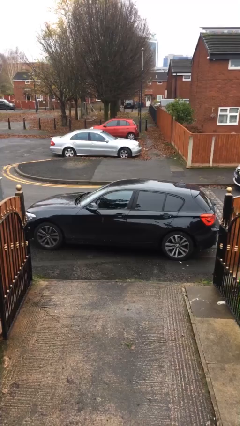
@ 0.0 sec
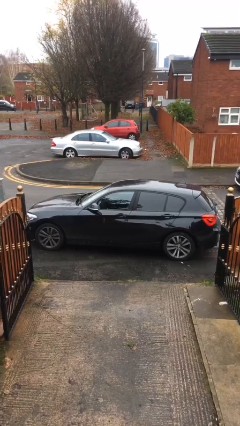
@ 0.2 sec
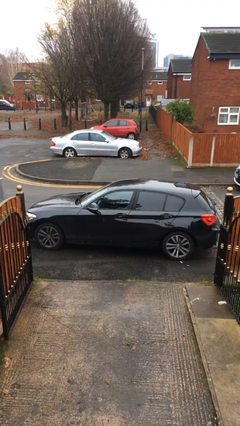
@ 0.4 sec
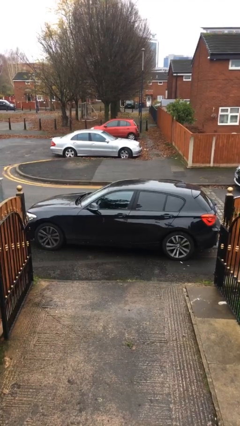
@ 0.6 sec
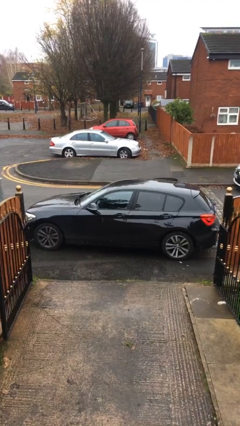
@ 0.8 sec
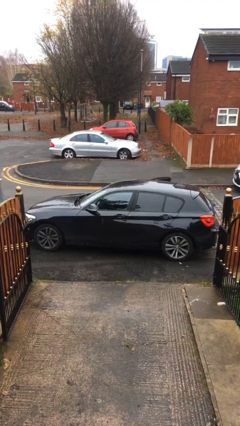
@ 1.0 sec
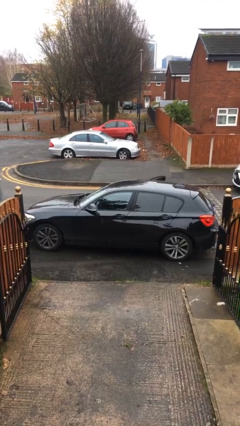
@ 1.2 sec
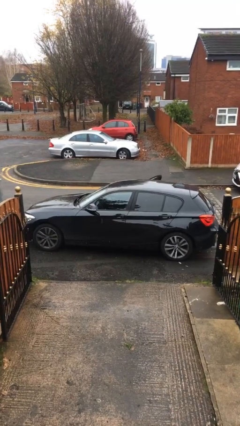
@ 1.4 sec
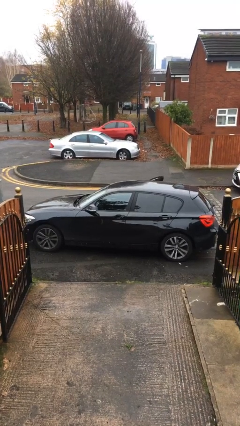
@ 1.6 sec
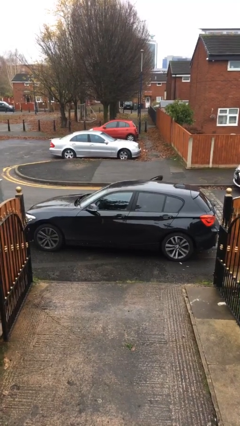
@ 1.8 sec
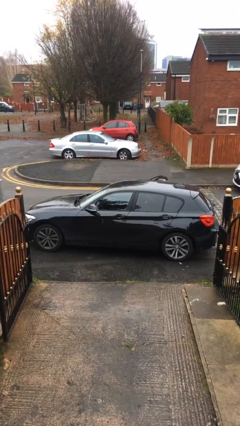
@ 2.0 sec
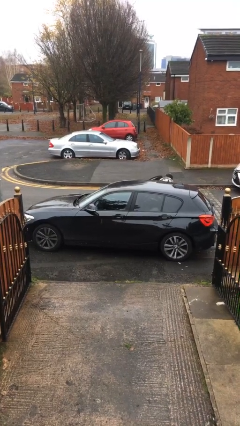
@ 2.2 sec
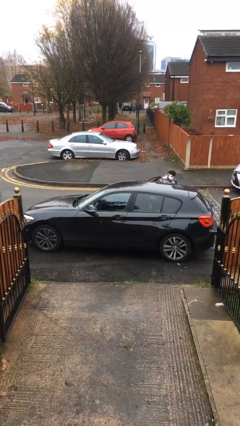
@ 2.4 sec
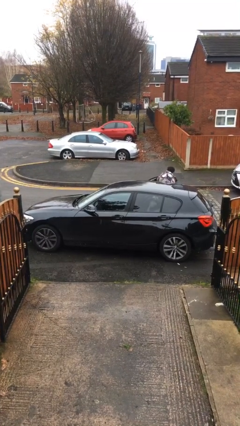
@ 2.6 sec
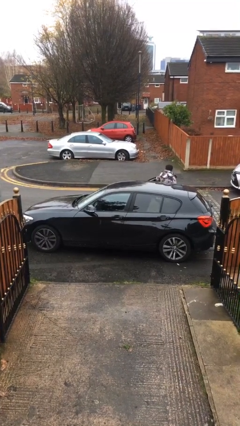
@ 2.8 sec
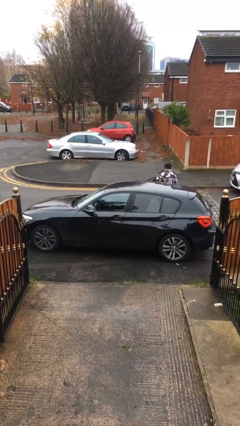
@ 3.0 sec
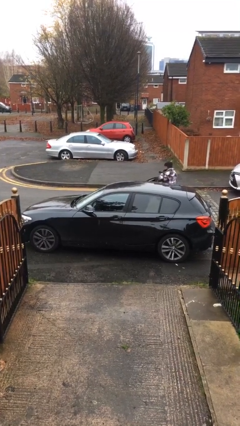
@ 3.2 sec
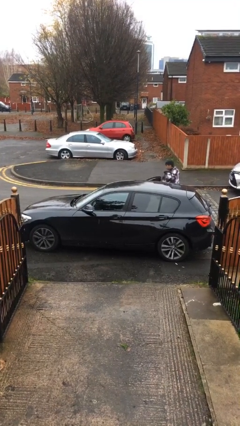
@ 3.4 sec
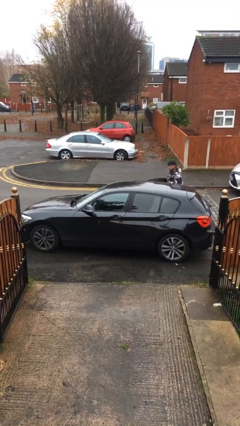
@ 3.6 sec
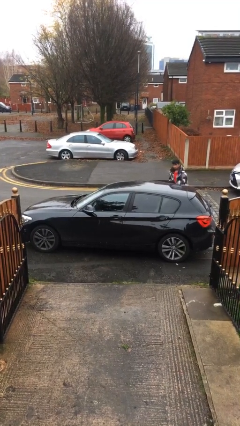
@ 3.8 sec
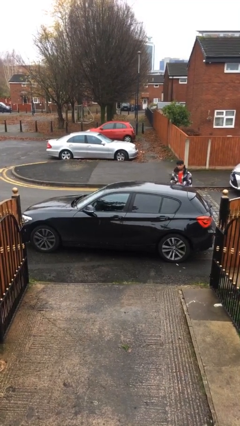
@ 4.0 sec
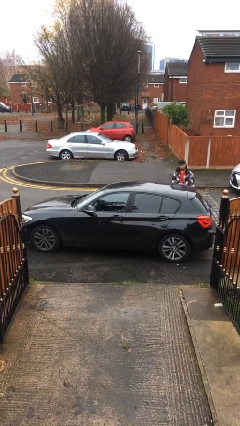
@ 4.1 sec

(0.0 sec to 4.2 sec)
car drops off person

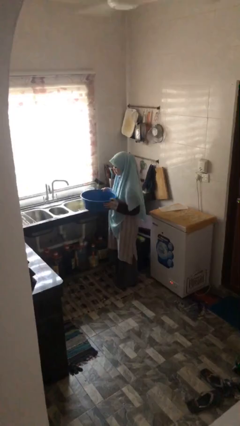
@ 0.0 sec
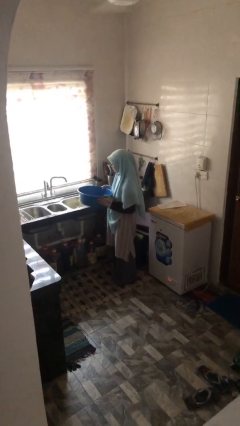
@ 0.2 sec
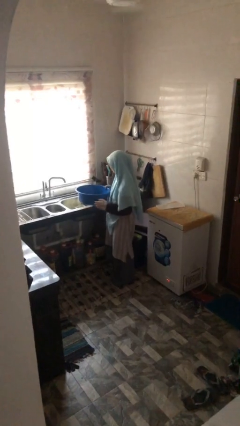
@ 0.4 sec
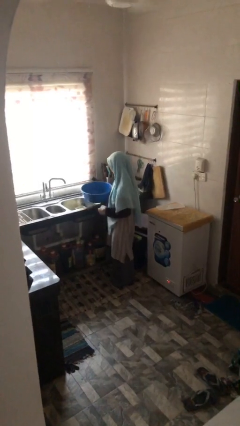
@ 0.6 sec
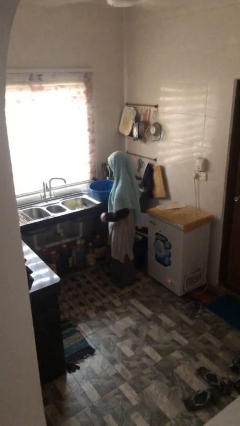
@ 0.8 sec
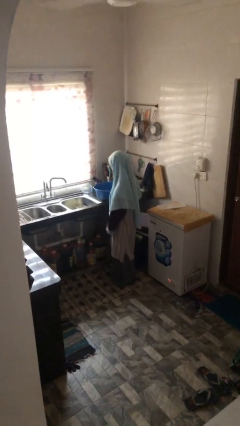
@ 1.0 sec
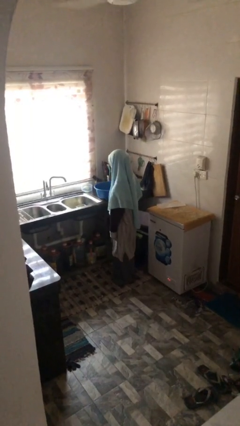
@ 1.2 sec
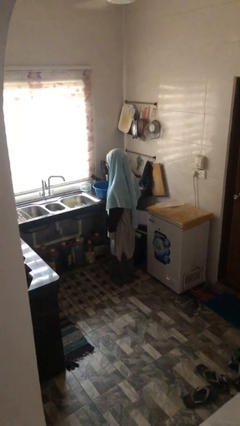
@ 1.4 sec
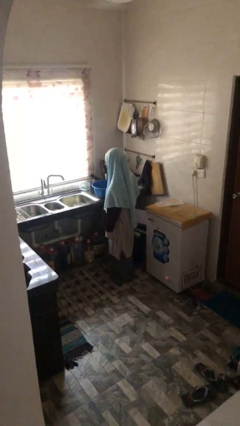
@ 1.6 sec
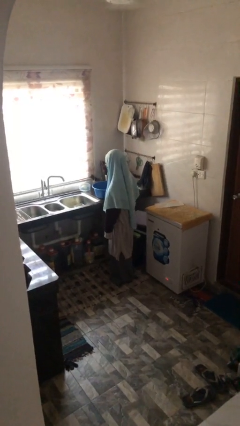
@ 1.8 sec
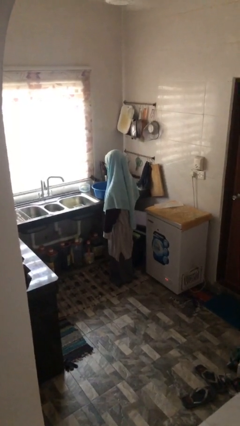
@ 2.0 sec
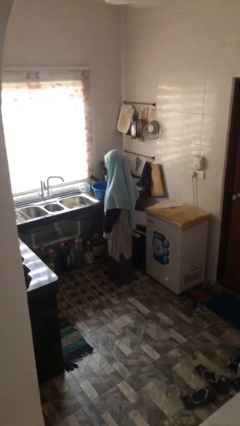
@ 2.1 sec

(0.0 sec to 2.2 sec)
person puts down object on countertop

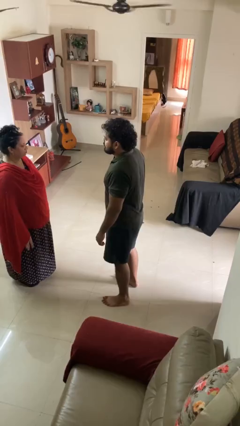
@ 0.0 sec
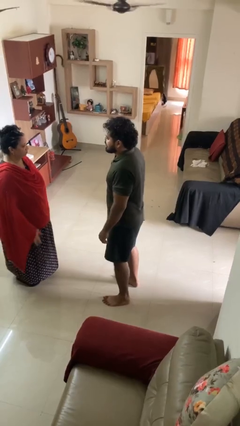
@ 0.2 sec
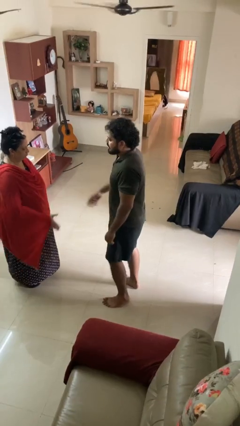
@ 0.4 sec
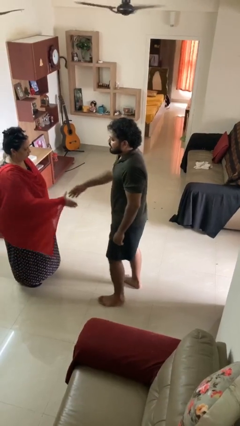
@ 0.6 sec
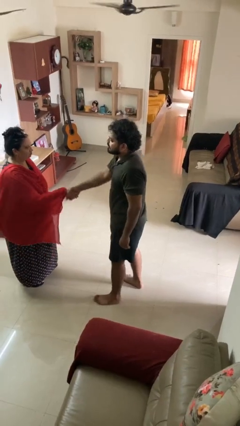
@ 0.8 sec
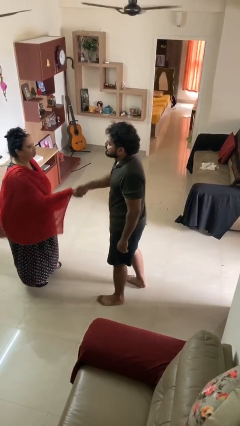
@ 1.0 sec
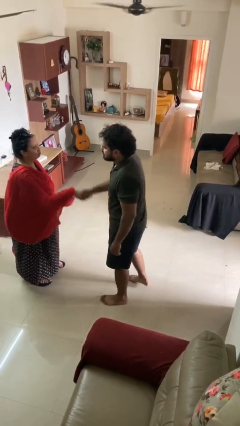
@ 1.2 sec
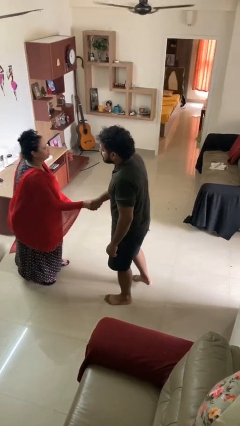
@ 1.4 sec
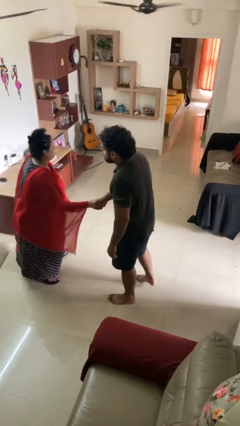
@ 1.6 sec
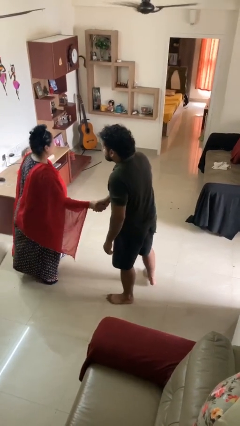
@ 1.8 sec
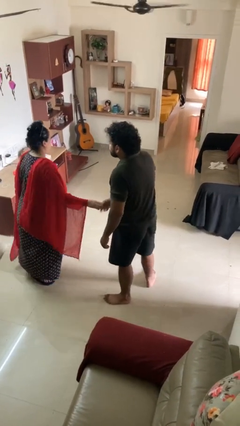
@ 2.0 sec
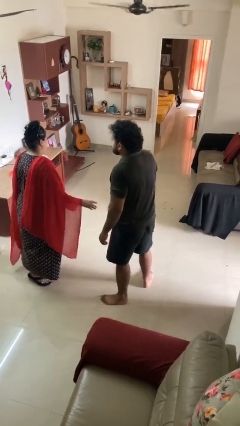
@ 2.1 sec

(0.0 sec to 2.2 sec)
person shakes hand

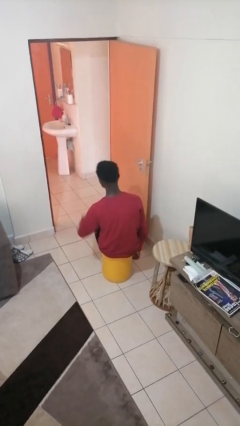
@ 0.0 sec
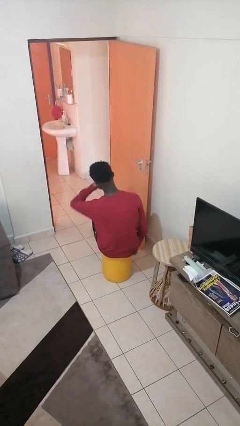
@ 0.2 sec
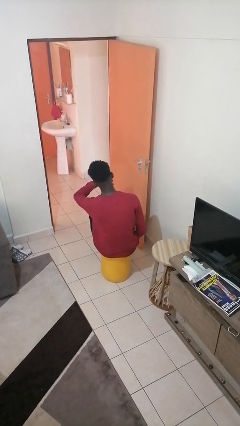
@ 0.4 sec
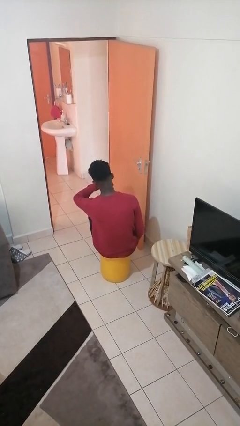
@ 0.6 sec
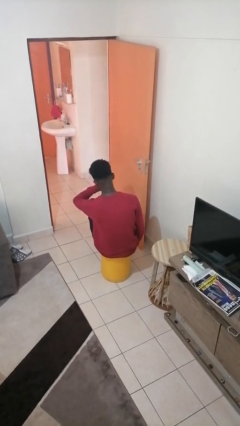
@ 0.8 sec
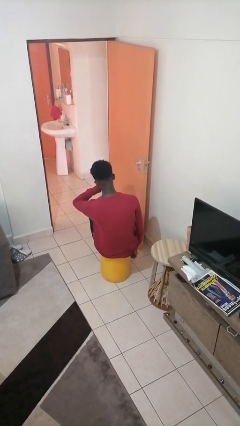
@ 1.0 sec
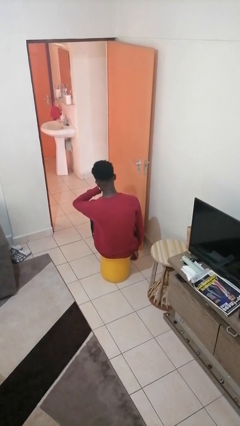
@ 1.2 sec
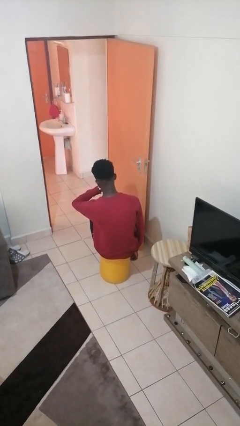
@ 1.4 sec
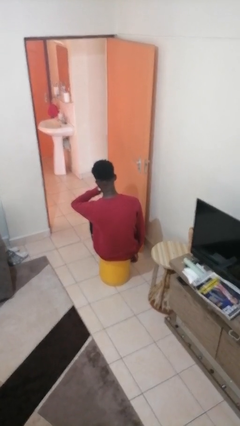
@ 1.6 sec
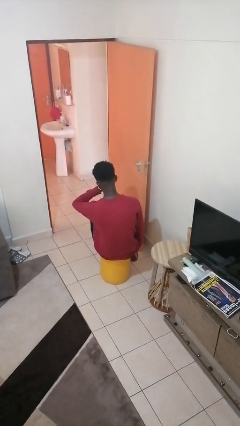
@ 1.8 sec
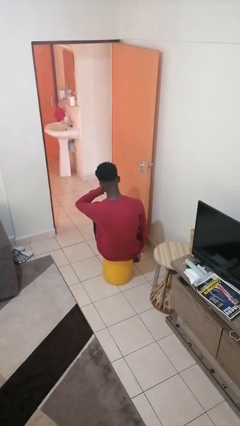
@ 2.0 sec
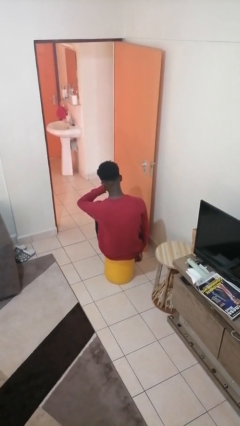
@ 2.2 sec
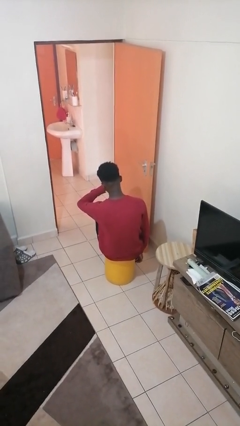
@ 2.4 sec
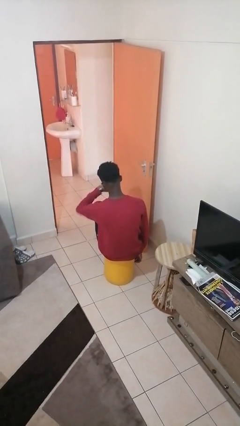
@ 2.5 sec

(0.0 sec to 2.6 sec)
person looks at wristwatch

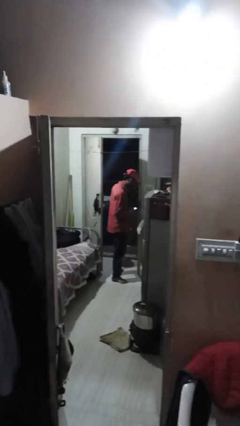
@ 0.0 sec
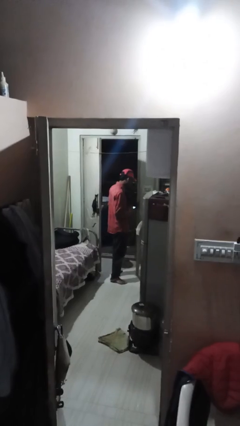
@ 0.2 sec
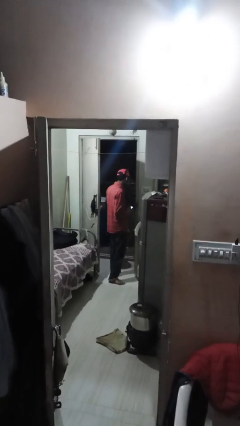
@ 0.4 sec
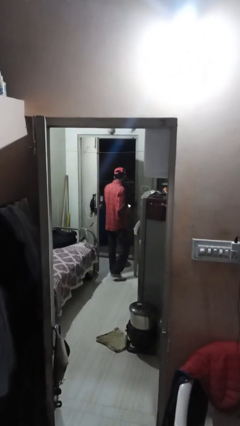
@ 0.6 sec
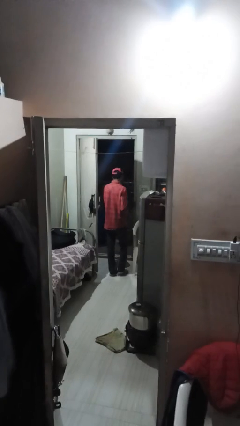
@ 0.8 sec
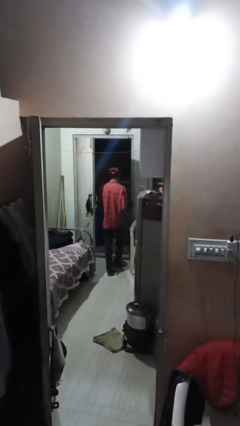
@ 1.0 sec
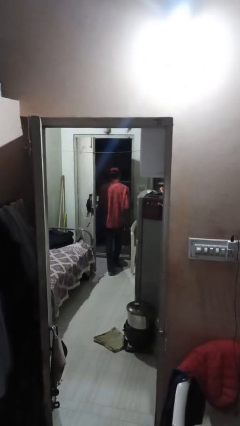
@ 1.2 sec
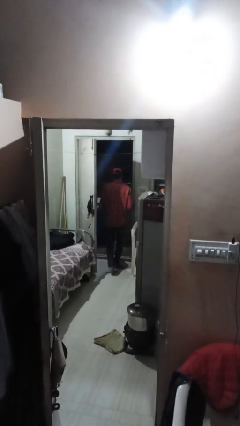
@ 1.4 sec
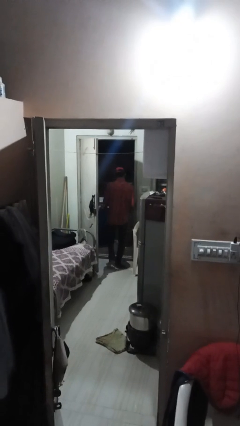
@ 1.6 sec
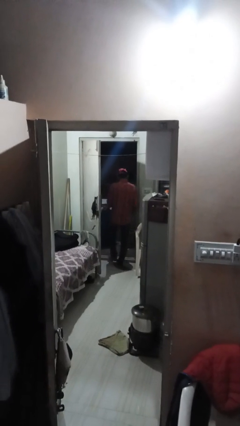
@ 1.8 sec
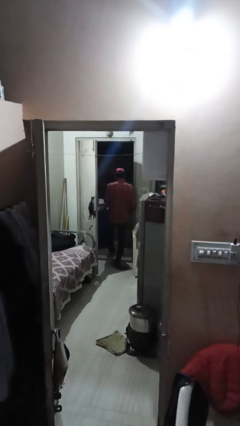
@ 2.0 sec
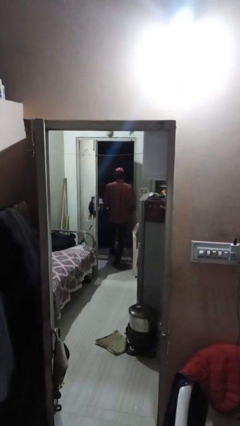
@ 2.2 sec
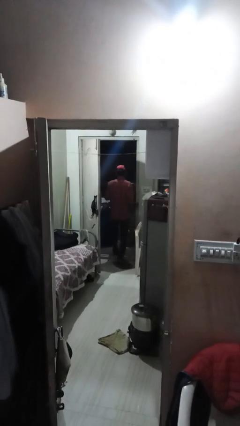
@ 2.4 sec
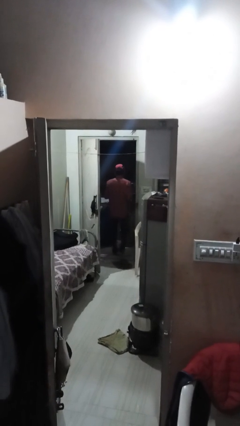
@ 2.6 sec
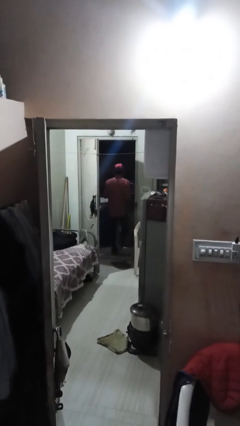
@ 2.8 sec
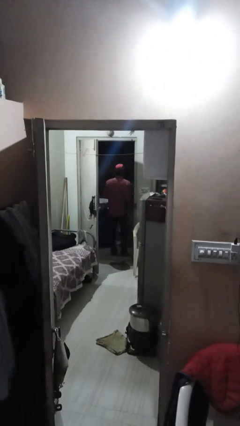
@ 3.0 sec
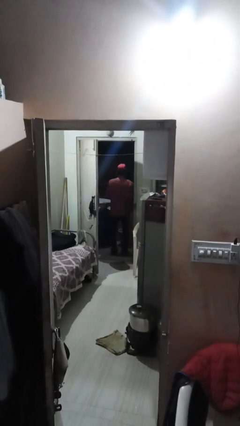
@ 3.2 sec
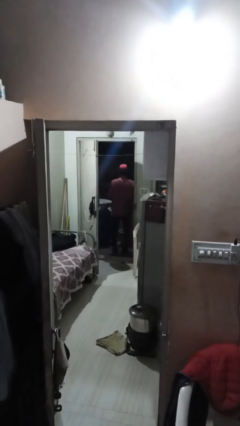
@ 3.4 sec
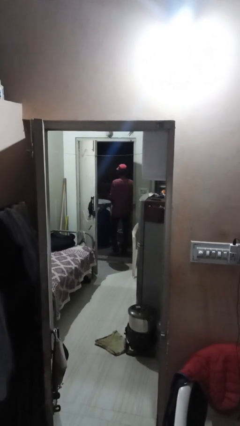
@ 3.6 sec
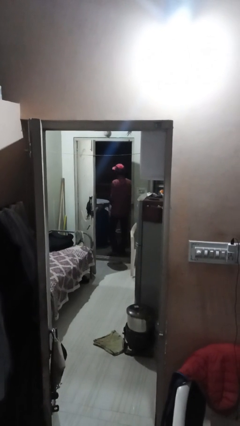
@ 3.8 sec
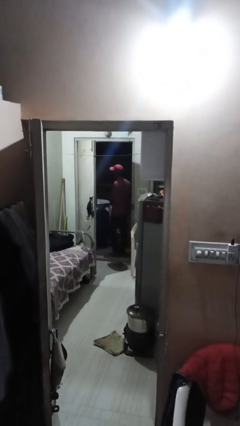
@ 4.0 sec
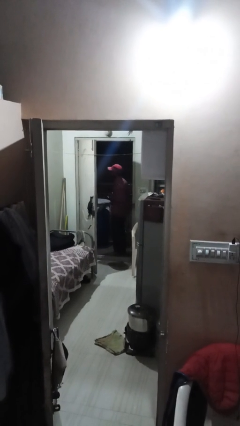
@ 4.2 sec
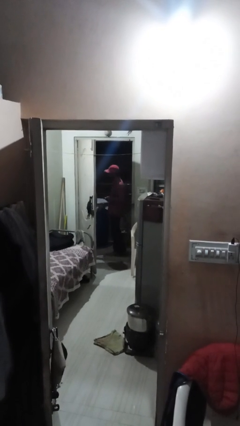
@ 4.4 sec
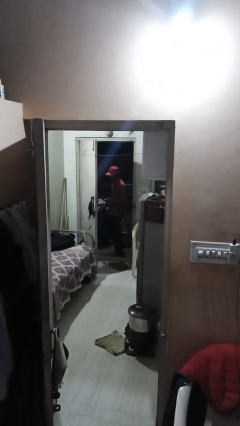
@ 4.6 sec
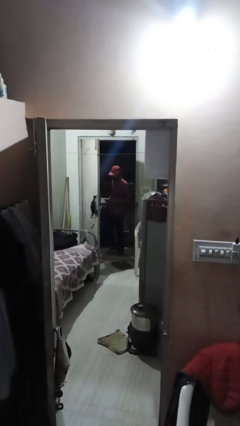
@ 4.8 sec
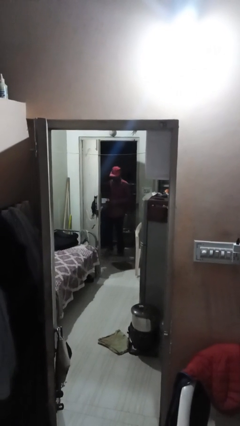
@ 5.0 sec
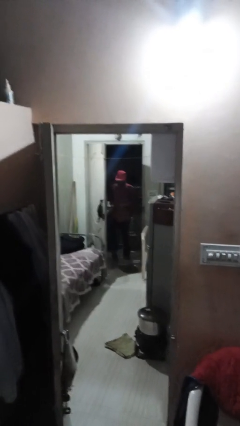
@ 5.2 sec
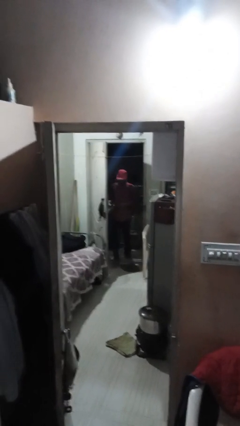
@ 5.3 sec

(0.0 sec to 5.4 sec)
person exits scene through structure

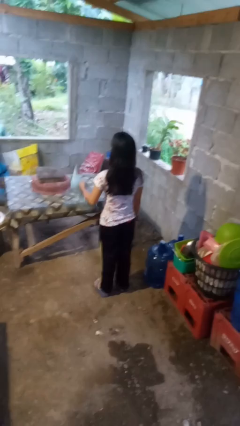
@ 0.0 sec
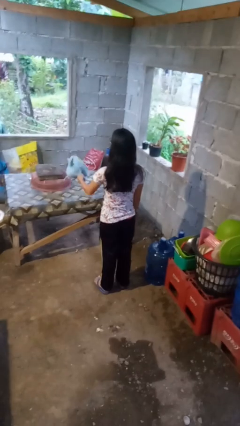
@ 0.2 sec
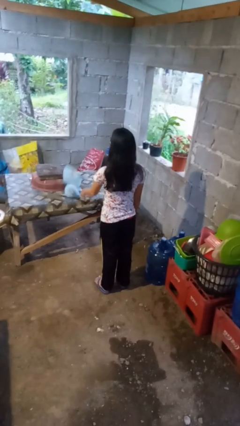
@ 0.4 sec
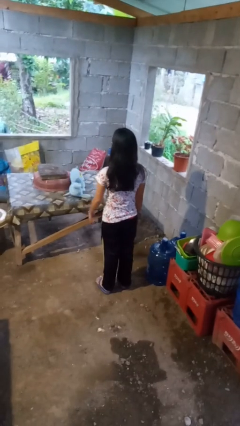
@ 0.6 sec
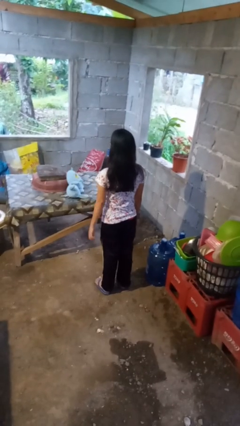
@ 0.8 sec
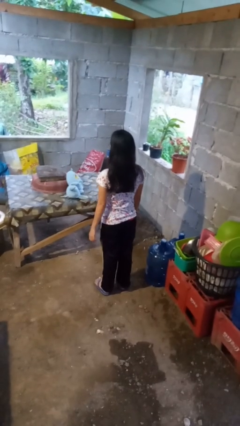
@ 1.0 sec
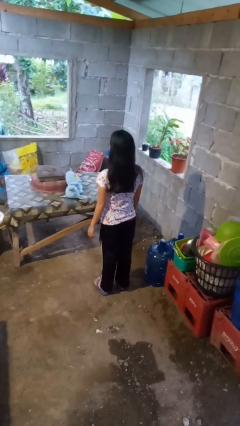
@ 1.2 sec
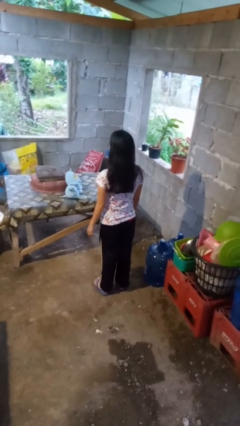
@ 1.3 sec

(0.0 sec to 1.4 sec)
person throws object on table
